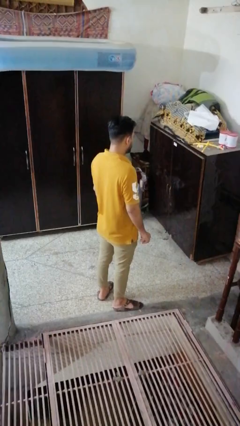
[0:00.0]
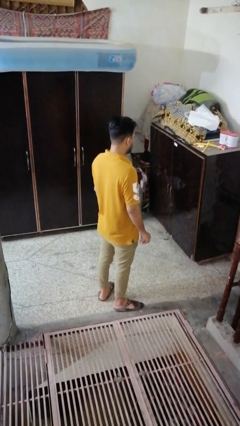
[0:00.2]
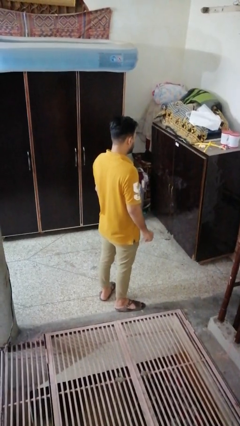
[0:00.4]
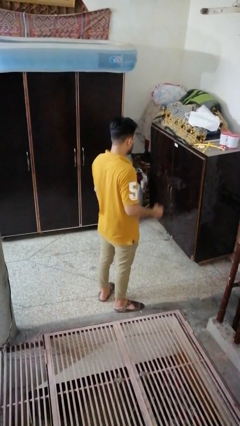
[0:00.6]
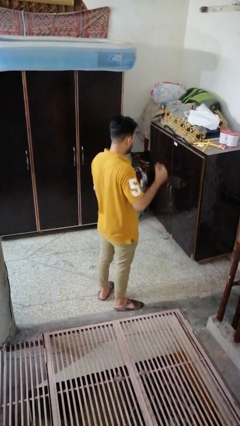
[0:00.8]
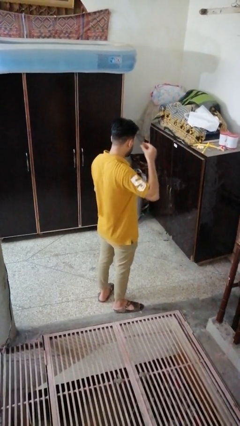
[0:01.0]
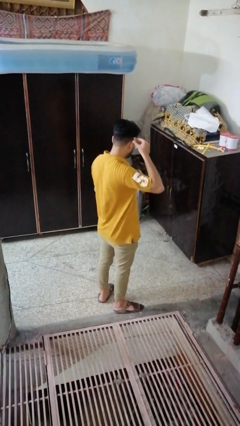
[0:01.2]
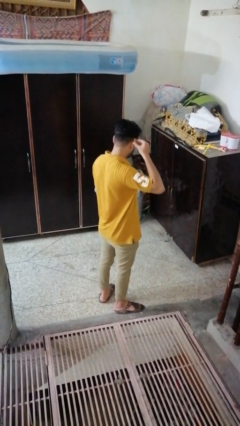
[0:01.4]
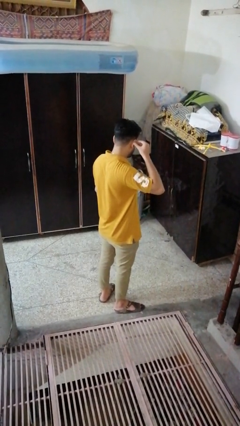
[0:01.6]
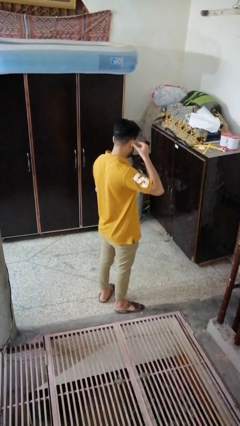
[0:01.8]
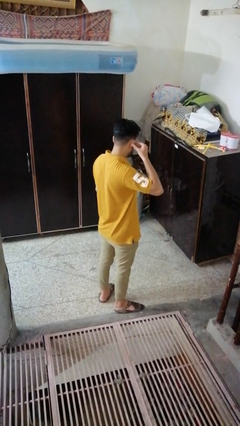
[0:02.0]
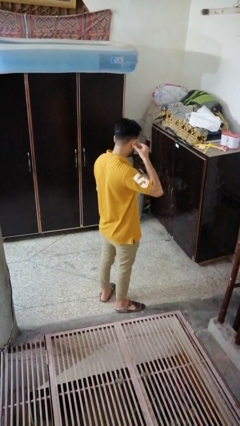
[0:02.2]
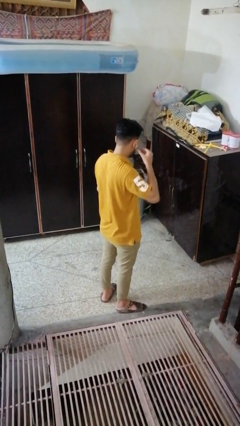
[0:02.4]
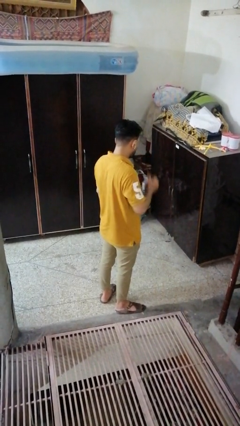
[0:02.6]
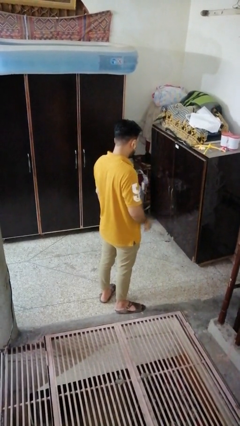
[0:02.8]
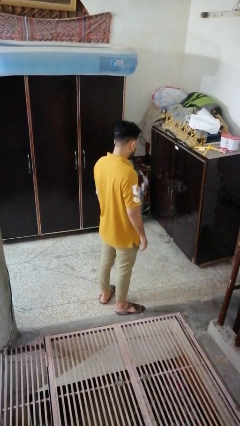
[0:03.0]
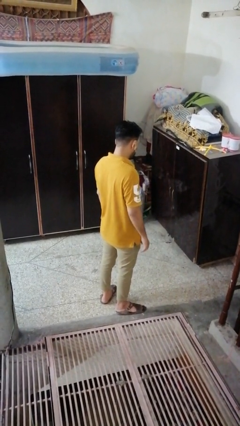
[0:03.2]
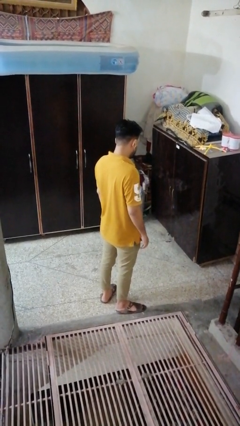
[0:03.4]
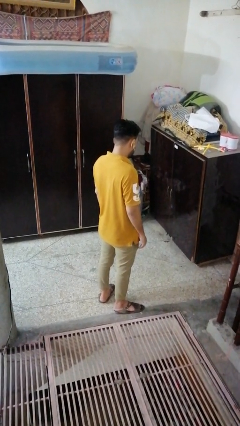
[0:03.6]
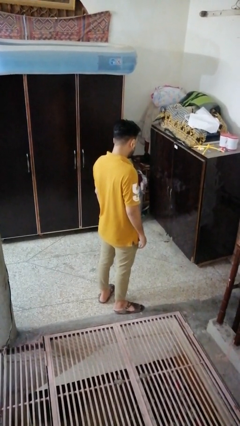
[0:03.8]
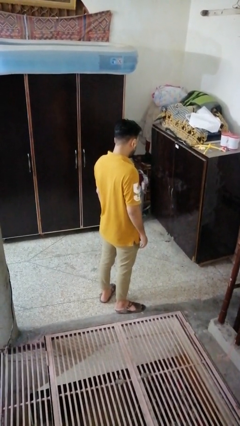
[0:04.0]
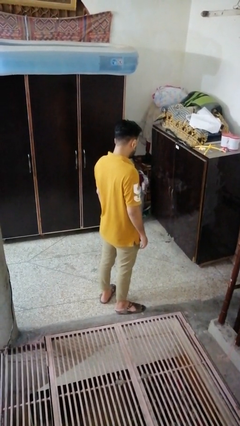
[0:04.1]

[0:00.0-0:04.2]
person puts on earrings

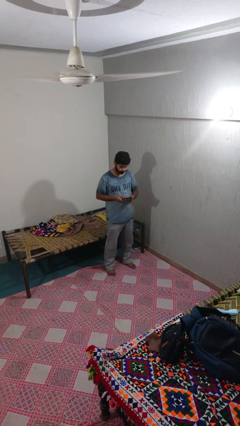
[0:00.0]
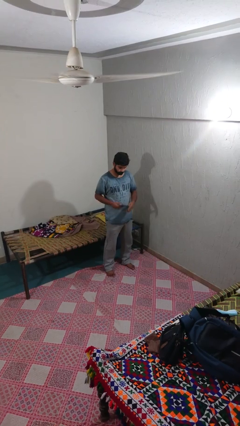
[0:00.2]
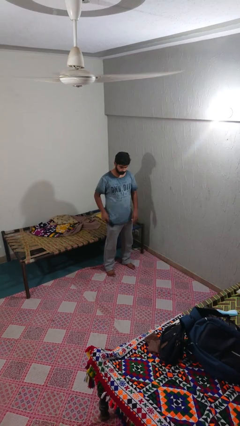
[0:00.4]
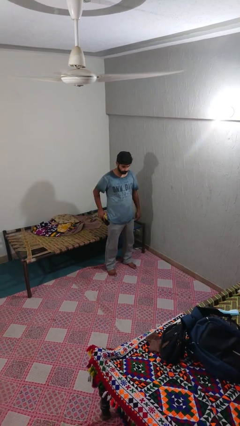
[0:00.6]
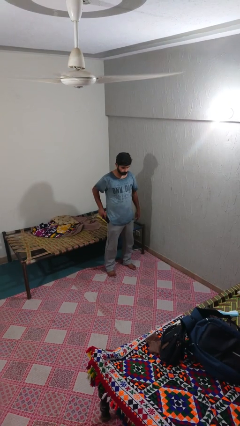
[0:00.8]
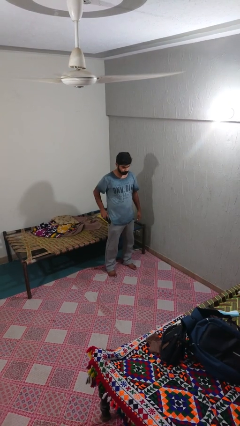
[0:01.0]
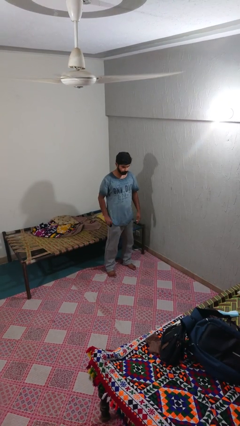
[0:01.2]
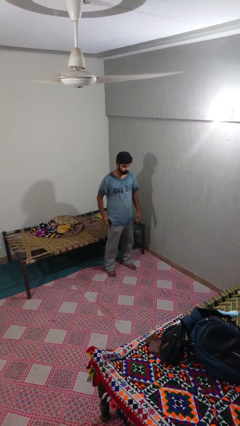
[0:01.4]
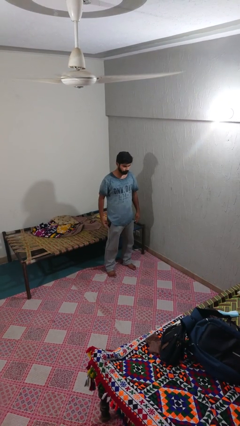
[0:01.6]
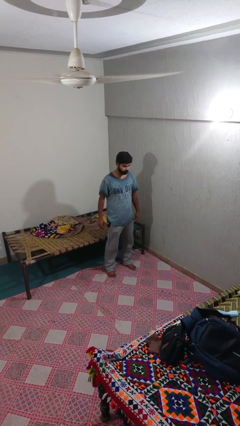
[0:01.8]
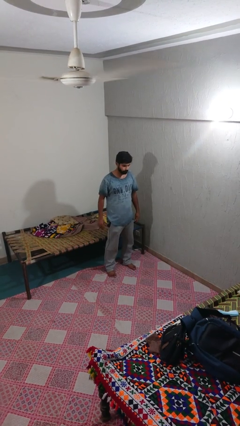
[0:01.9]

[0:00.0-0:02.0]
person puts phone into pocket

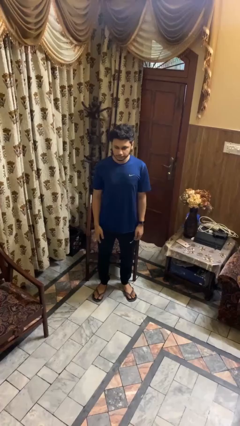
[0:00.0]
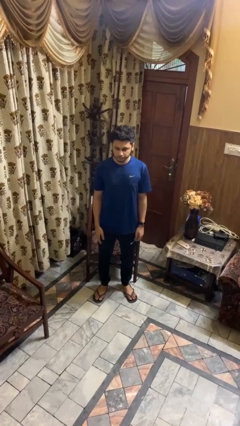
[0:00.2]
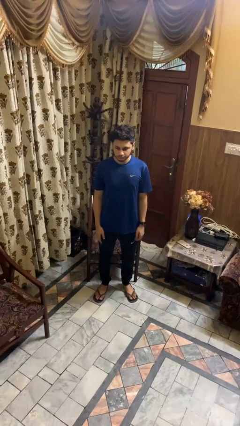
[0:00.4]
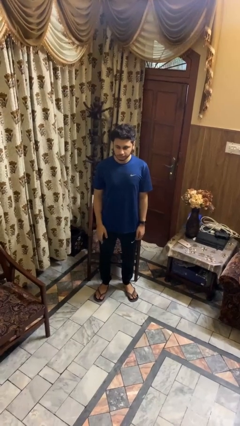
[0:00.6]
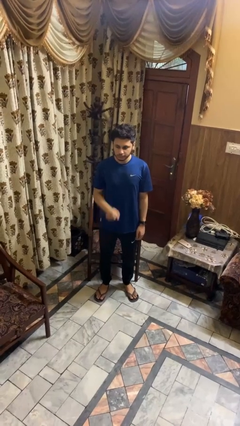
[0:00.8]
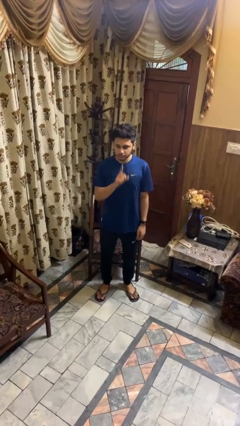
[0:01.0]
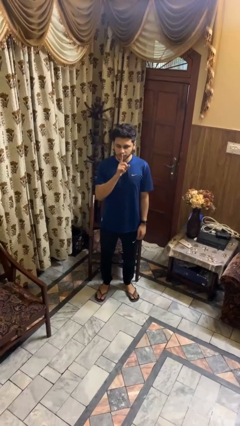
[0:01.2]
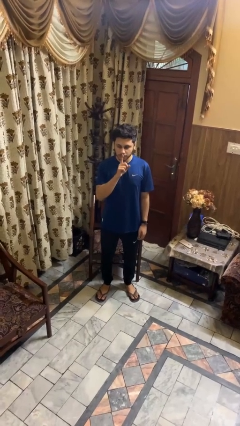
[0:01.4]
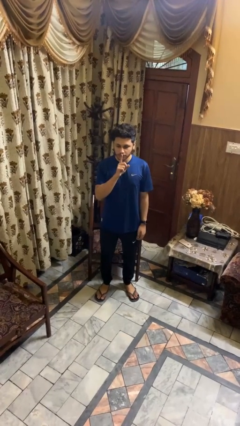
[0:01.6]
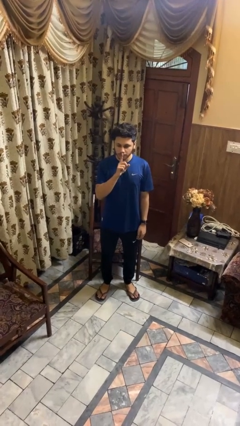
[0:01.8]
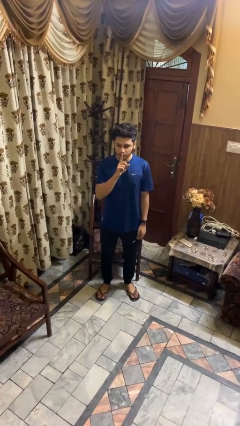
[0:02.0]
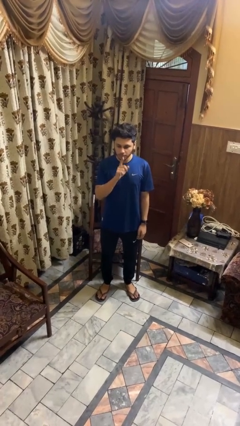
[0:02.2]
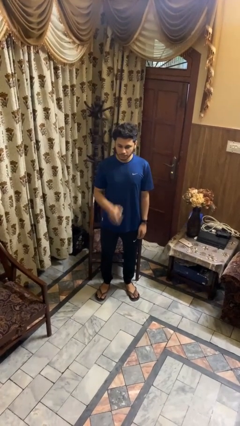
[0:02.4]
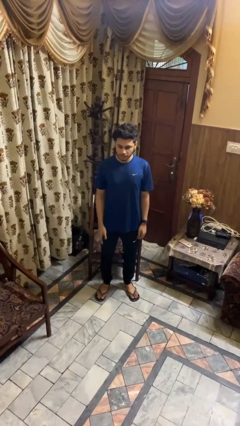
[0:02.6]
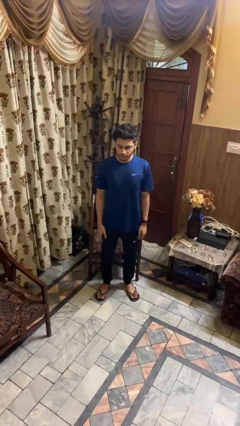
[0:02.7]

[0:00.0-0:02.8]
person gestures be quiet

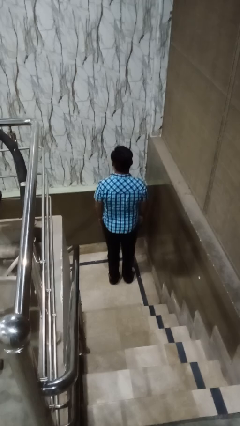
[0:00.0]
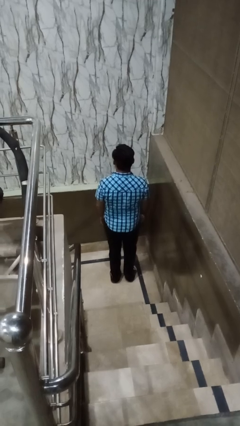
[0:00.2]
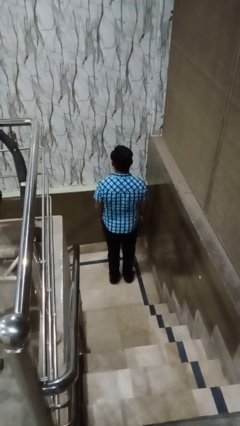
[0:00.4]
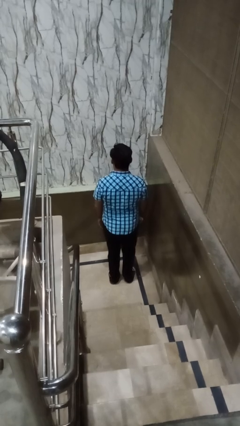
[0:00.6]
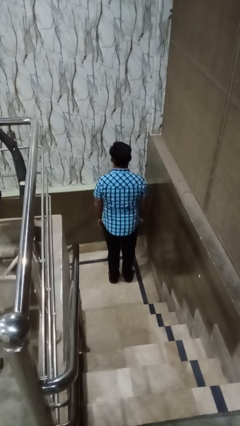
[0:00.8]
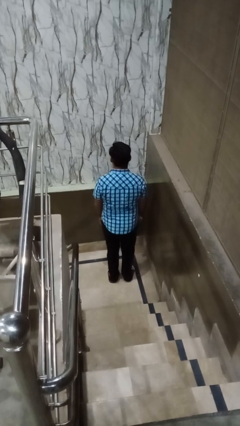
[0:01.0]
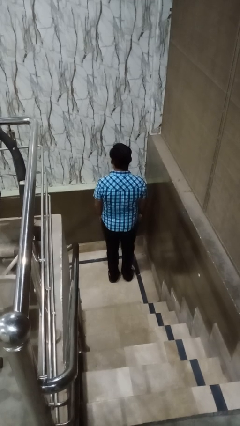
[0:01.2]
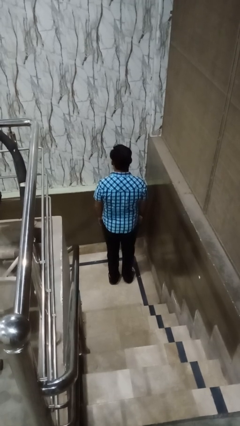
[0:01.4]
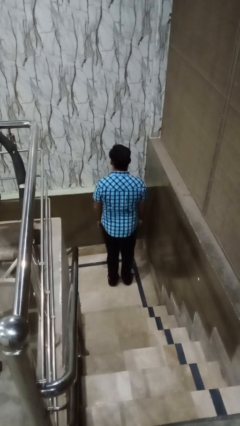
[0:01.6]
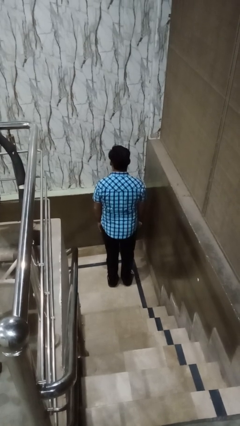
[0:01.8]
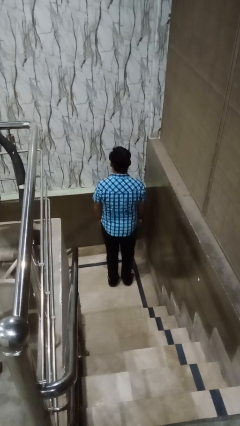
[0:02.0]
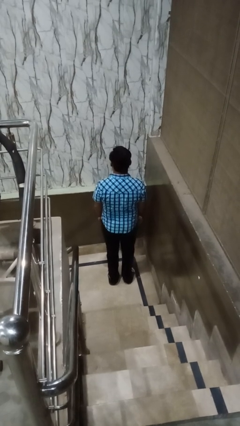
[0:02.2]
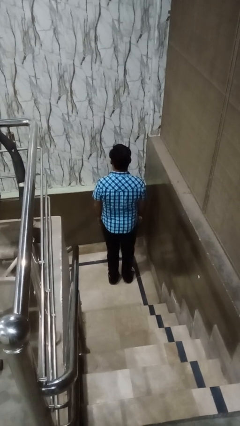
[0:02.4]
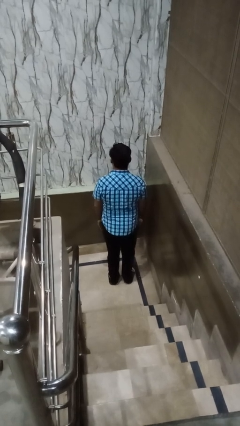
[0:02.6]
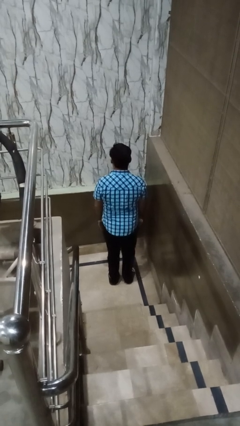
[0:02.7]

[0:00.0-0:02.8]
person wiggles hips

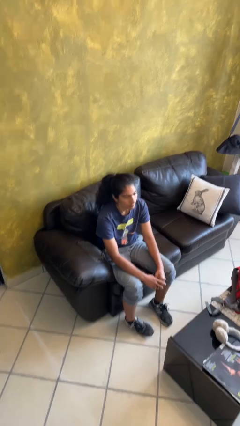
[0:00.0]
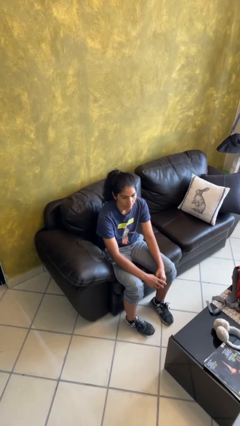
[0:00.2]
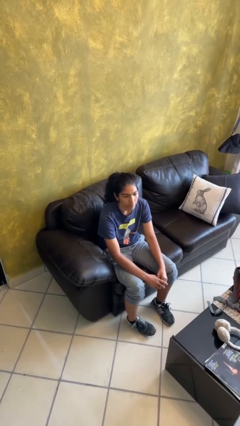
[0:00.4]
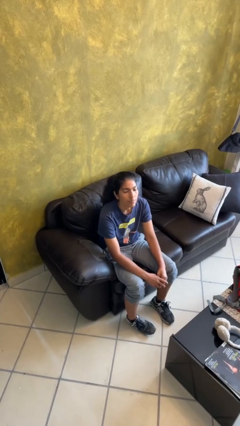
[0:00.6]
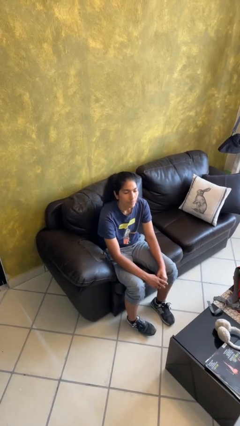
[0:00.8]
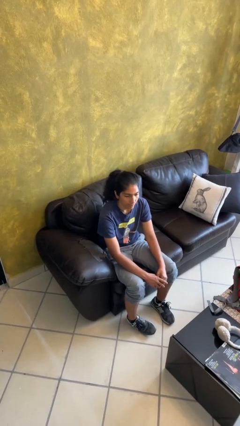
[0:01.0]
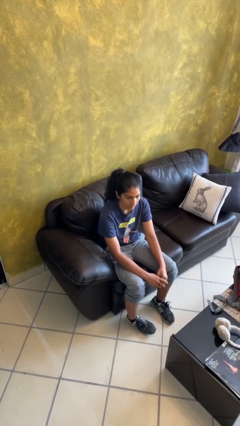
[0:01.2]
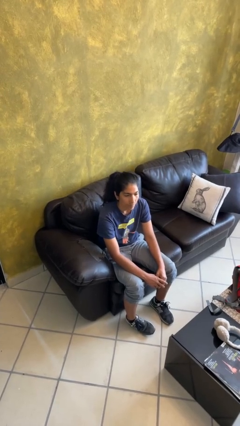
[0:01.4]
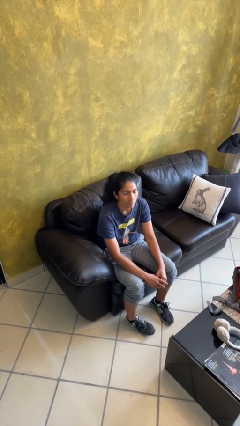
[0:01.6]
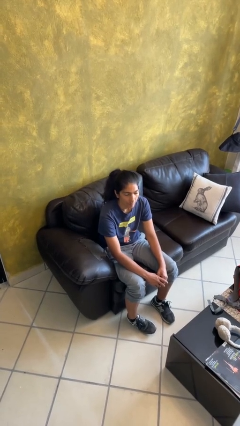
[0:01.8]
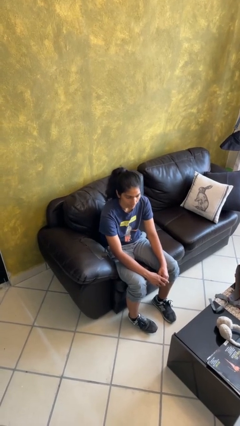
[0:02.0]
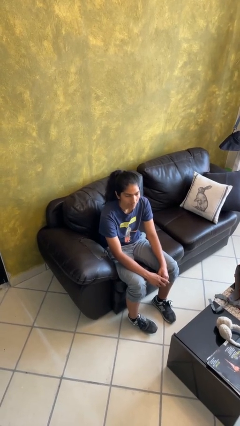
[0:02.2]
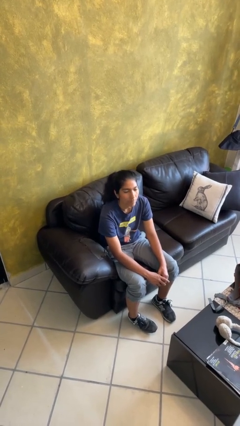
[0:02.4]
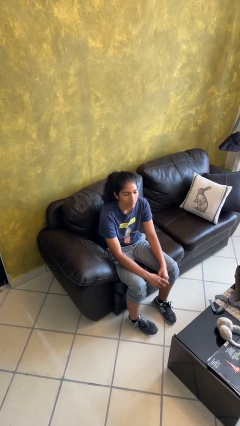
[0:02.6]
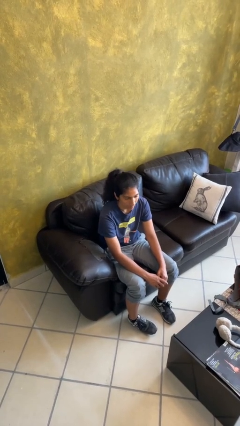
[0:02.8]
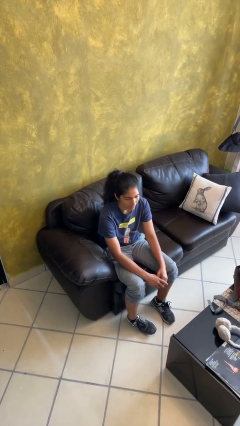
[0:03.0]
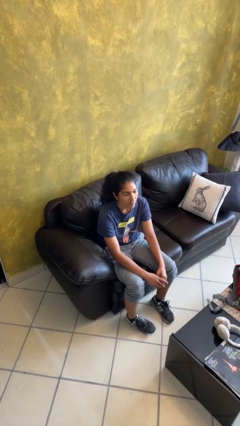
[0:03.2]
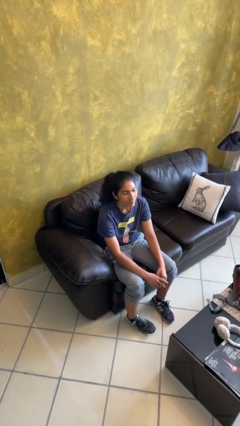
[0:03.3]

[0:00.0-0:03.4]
person nods head

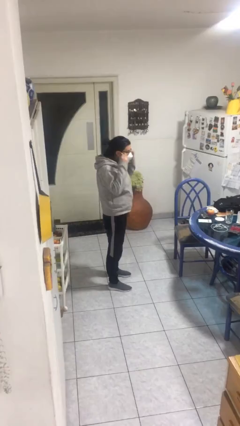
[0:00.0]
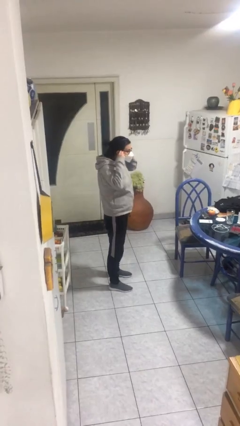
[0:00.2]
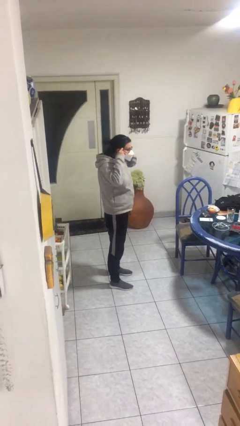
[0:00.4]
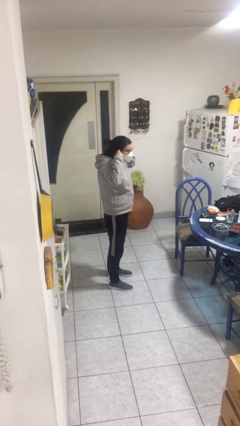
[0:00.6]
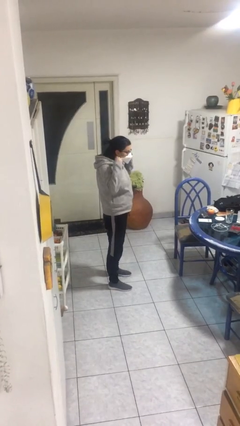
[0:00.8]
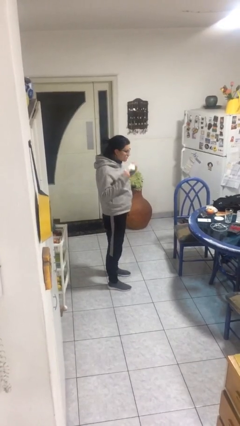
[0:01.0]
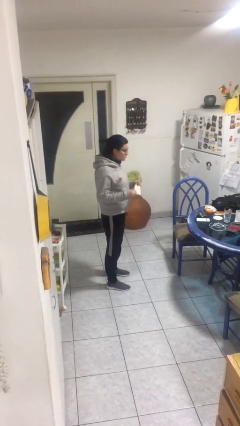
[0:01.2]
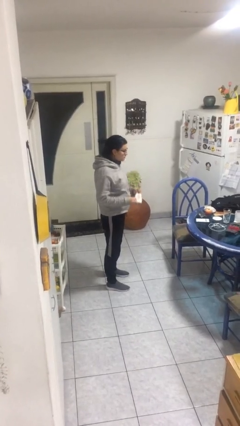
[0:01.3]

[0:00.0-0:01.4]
person takes off facemask

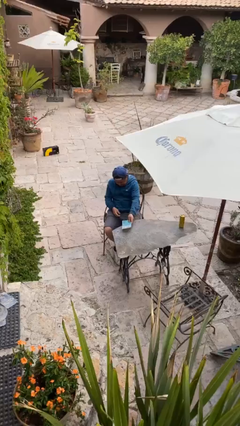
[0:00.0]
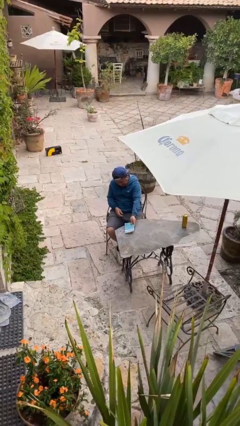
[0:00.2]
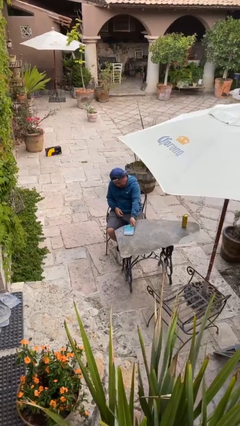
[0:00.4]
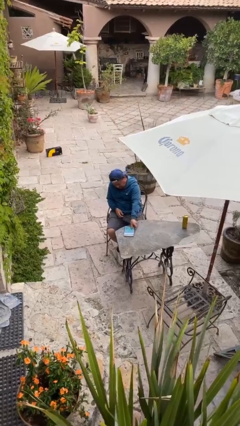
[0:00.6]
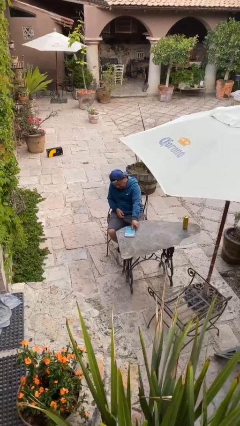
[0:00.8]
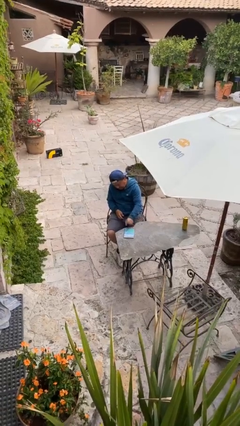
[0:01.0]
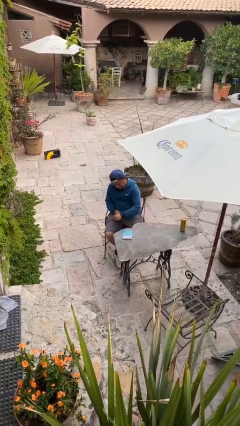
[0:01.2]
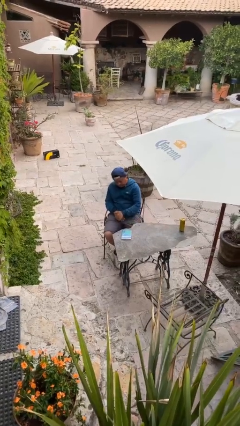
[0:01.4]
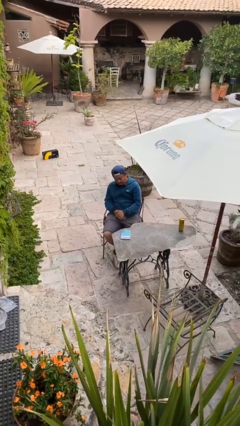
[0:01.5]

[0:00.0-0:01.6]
person puts down object on table
